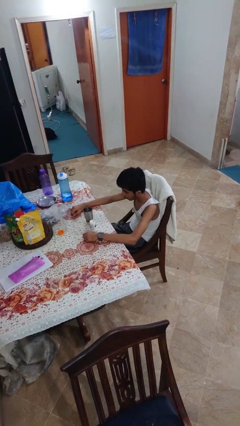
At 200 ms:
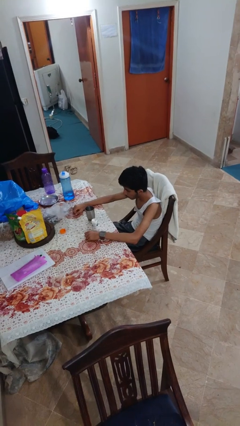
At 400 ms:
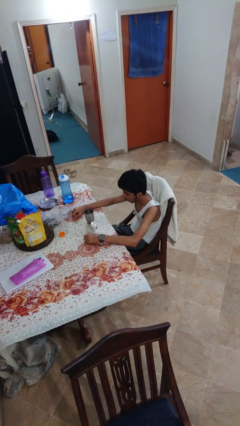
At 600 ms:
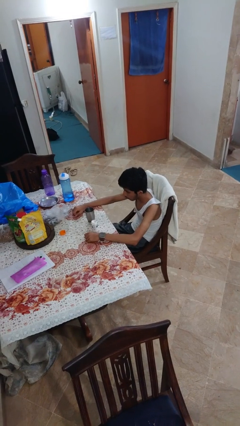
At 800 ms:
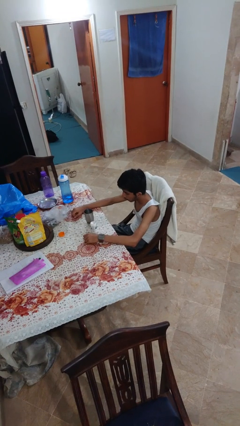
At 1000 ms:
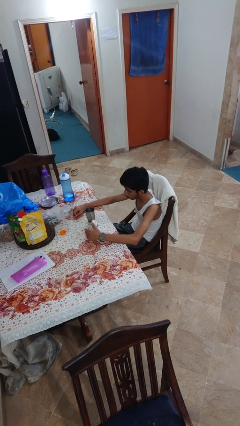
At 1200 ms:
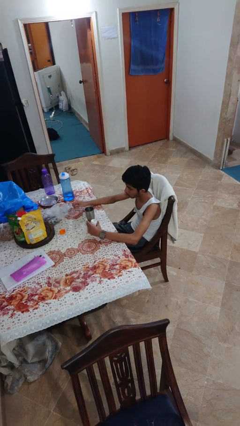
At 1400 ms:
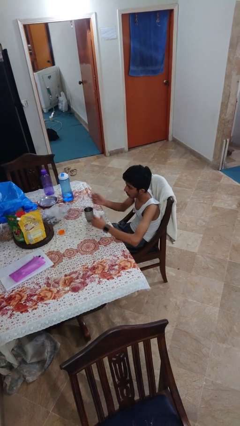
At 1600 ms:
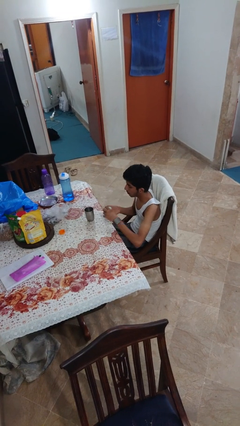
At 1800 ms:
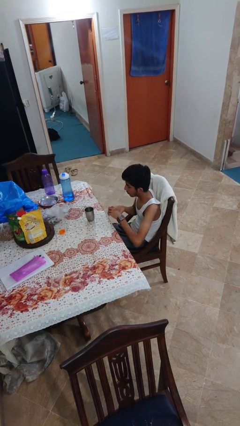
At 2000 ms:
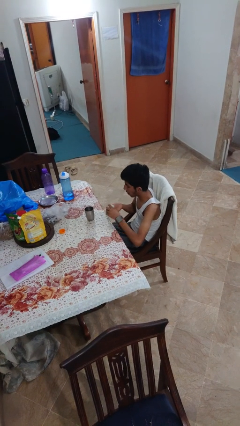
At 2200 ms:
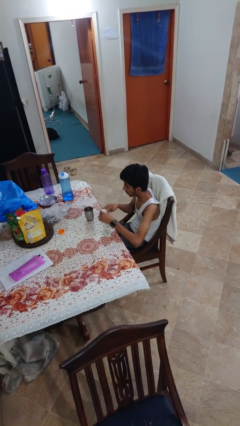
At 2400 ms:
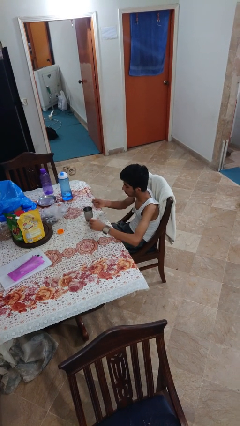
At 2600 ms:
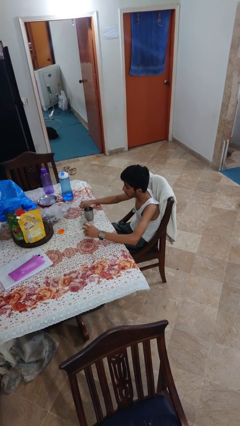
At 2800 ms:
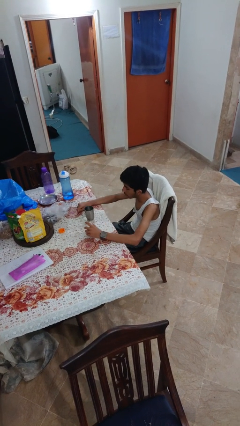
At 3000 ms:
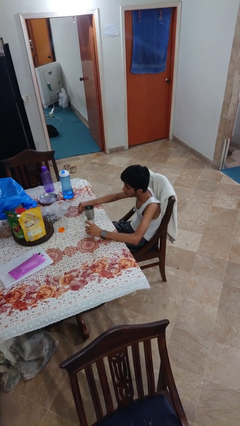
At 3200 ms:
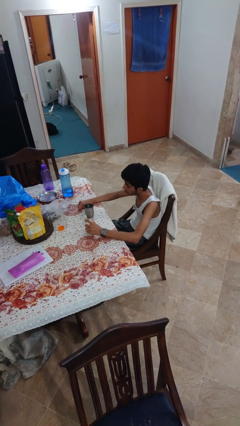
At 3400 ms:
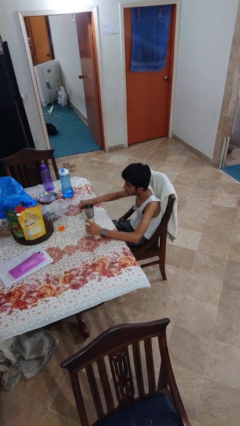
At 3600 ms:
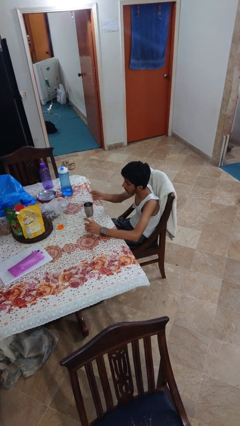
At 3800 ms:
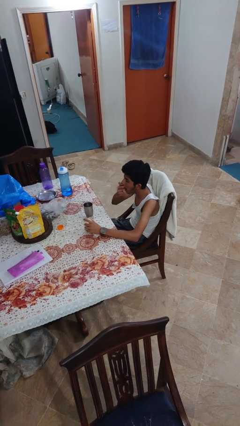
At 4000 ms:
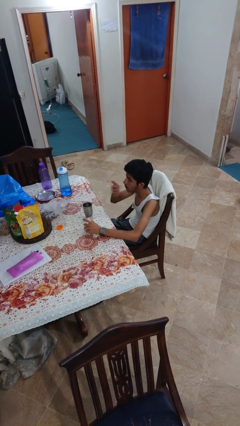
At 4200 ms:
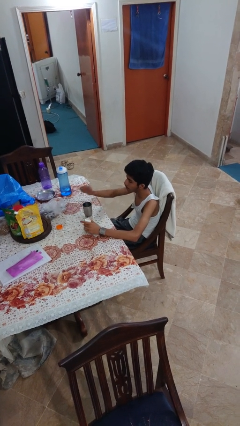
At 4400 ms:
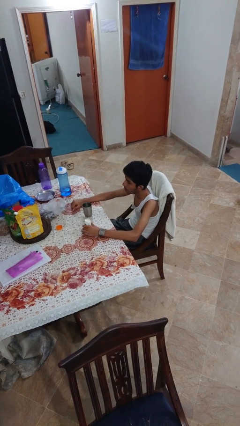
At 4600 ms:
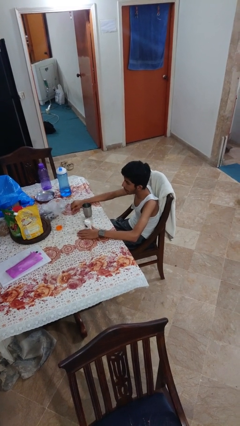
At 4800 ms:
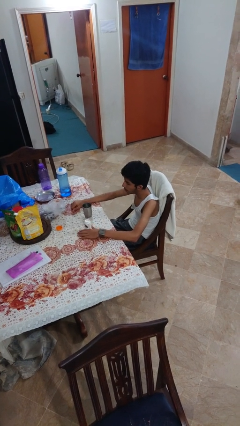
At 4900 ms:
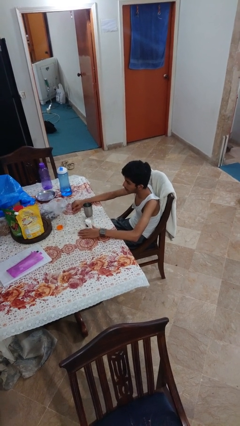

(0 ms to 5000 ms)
person takes medicine pills

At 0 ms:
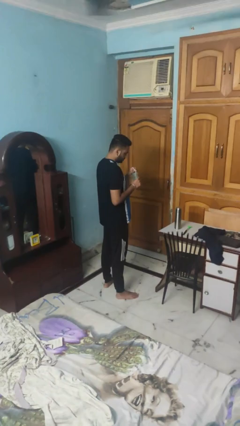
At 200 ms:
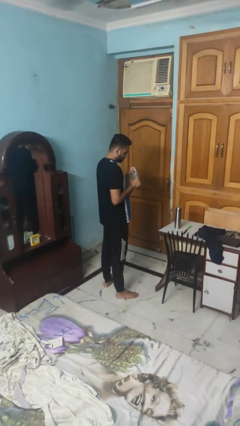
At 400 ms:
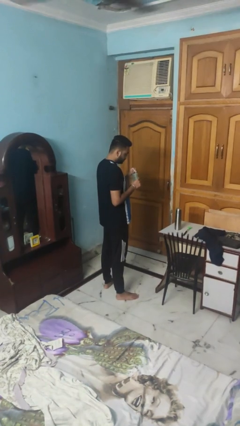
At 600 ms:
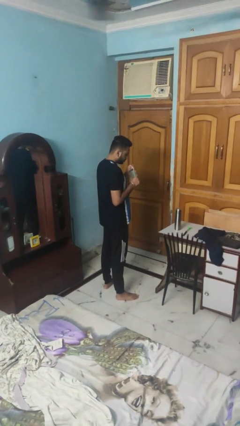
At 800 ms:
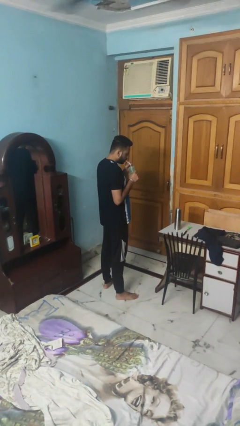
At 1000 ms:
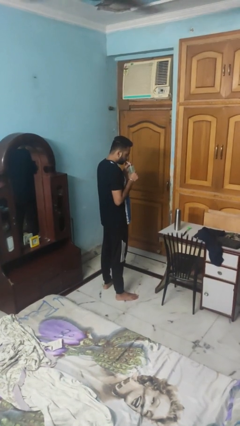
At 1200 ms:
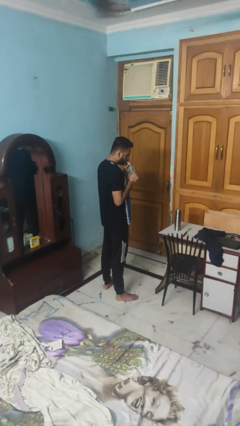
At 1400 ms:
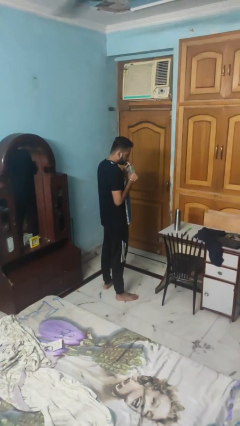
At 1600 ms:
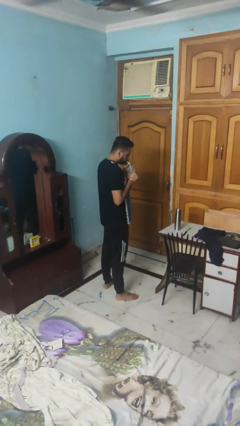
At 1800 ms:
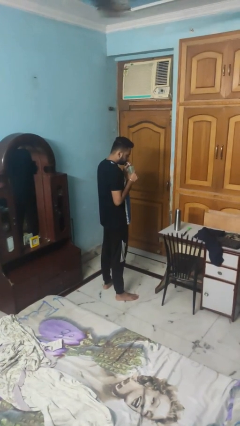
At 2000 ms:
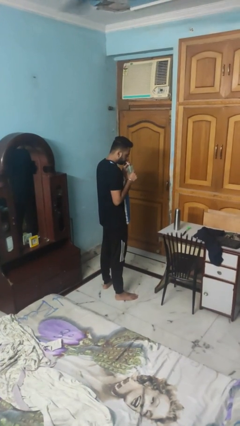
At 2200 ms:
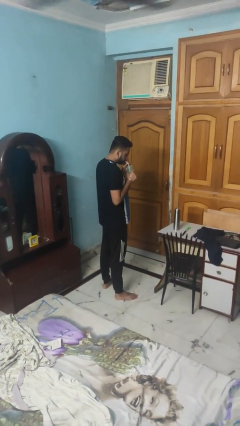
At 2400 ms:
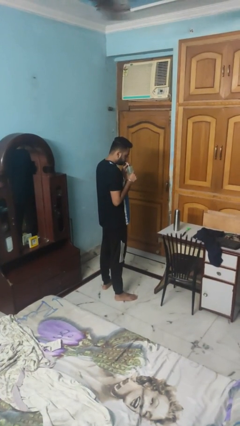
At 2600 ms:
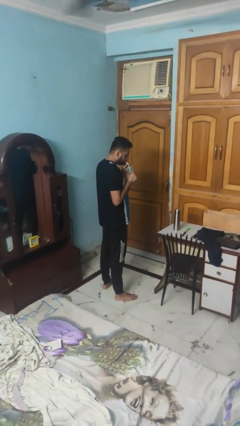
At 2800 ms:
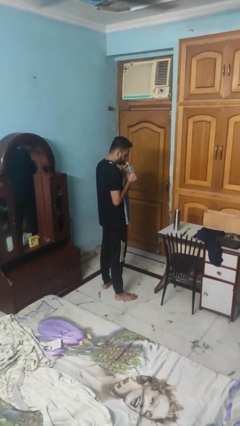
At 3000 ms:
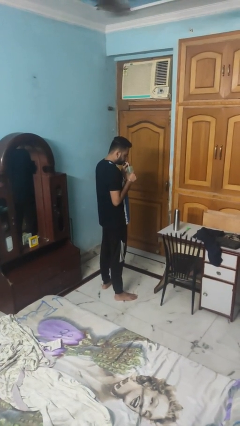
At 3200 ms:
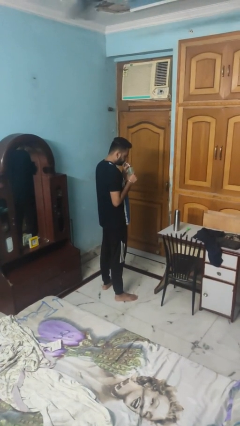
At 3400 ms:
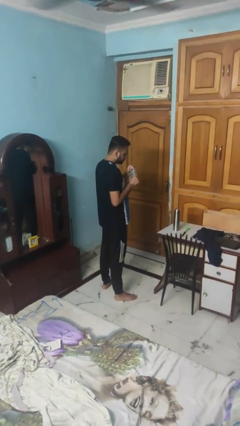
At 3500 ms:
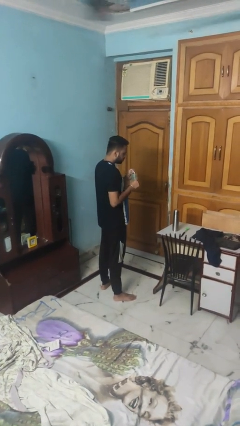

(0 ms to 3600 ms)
person drinks from straw

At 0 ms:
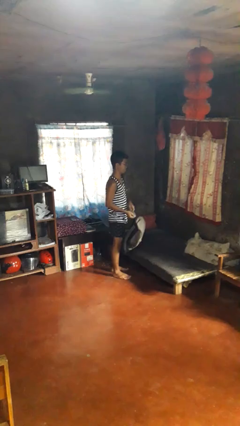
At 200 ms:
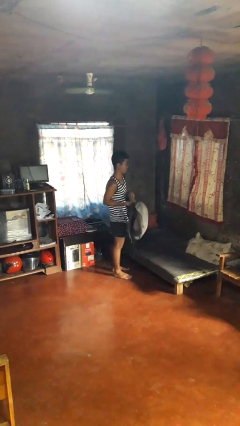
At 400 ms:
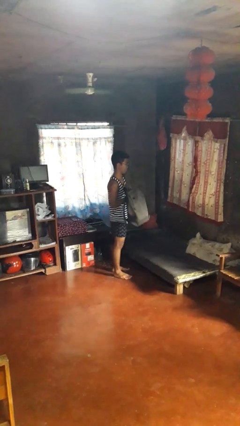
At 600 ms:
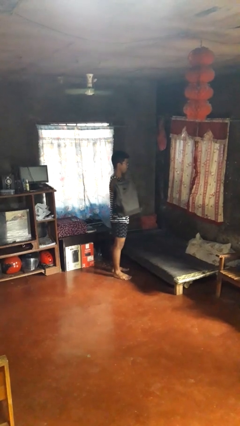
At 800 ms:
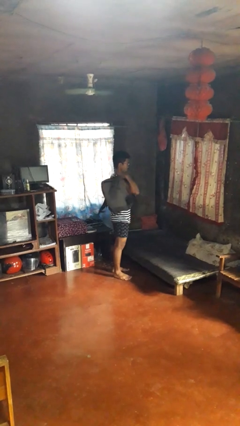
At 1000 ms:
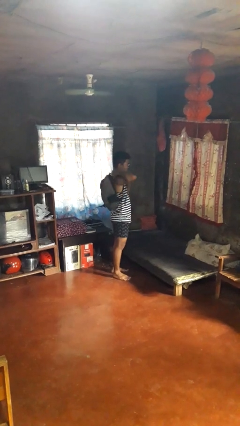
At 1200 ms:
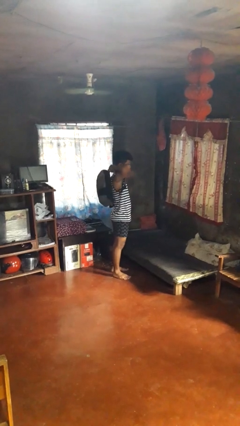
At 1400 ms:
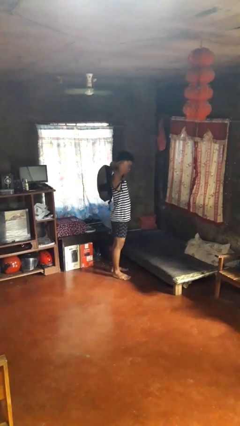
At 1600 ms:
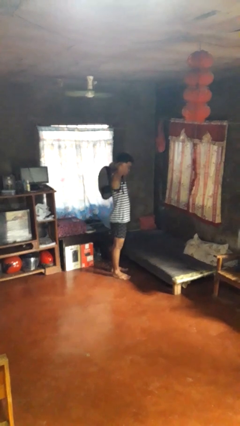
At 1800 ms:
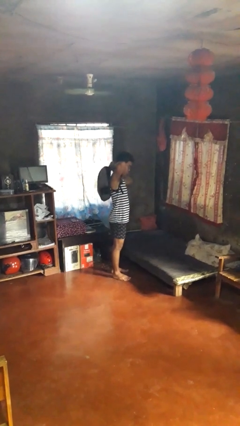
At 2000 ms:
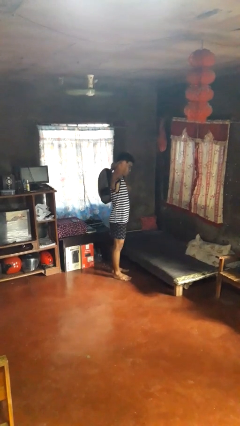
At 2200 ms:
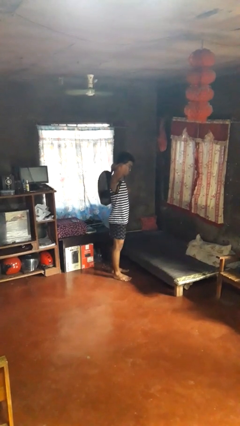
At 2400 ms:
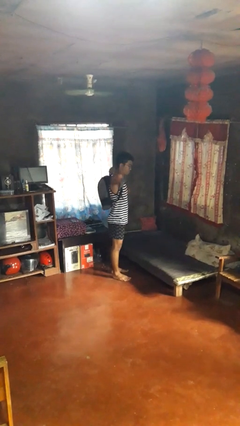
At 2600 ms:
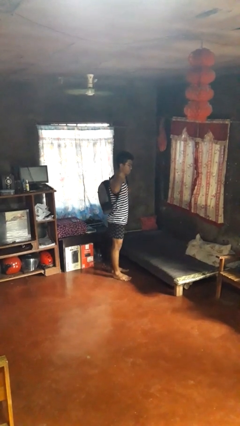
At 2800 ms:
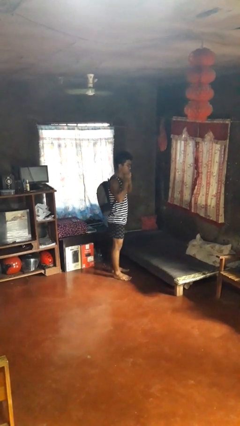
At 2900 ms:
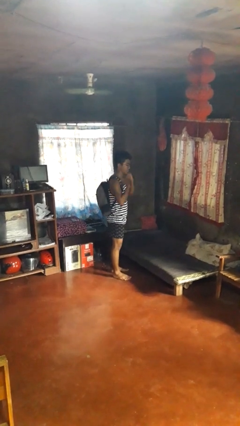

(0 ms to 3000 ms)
person puts on backpack

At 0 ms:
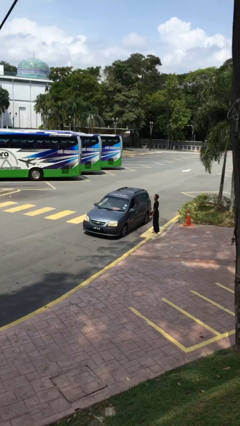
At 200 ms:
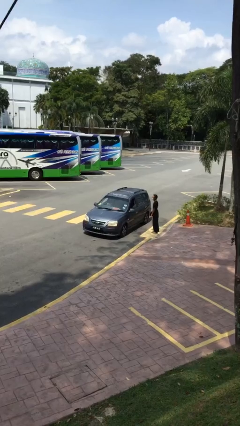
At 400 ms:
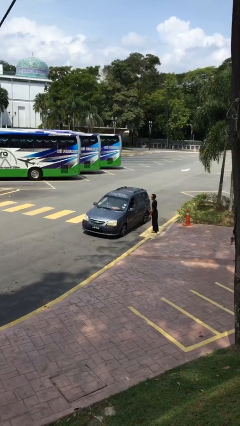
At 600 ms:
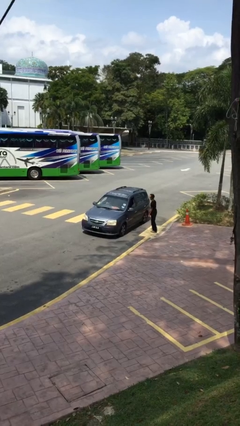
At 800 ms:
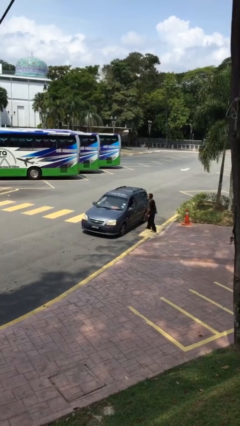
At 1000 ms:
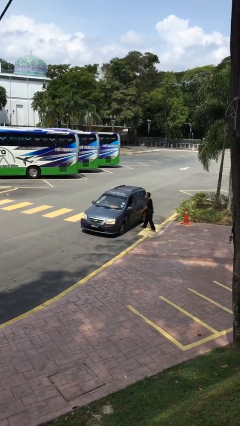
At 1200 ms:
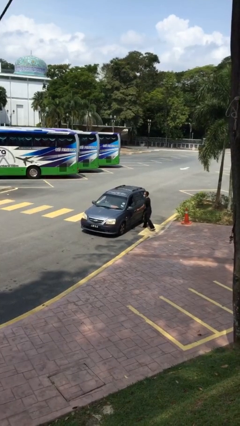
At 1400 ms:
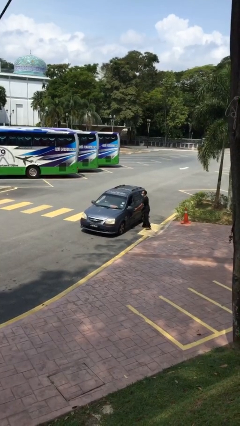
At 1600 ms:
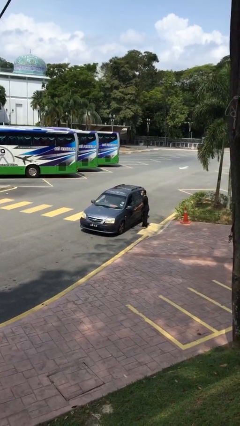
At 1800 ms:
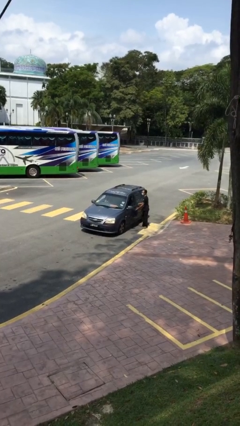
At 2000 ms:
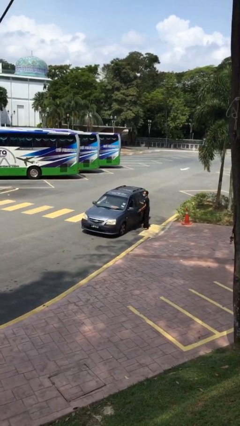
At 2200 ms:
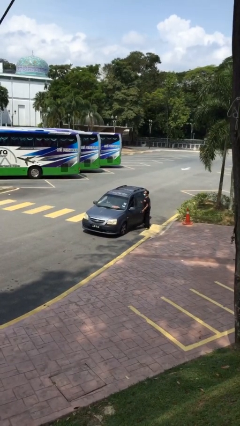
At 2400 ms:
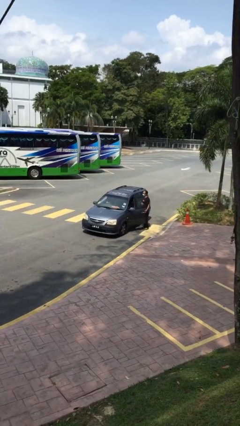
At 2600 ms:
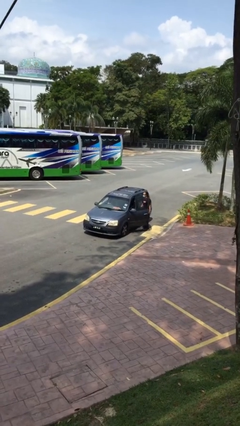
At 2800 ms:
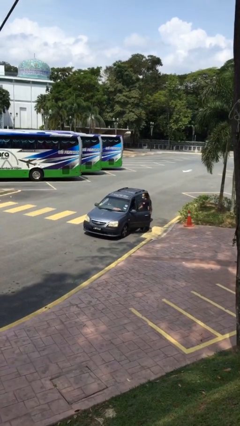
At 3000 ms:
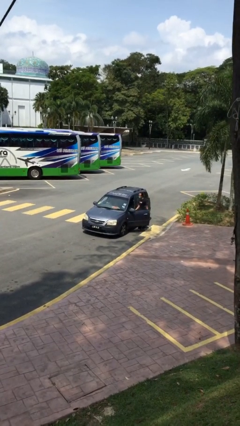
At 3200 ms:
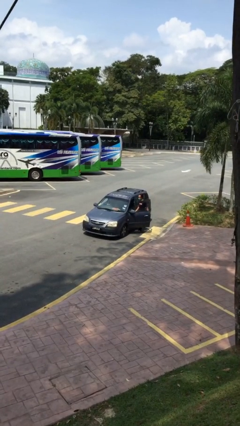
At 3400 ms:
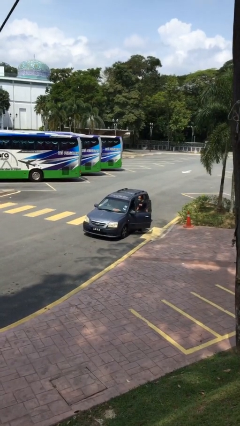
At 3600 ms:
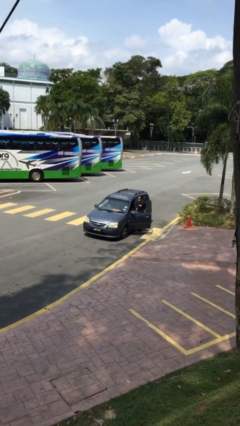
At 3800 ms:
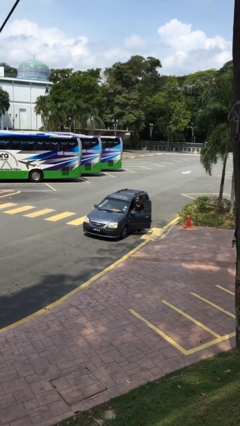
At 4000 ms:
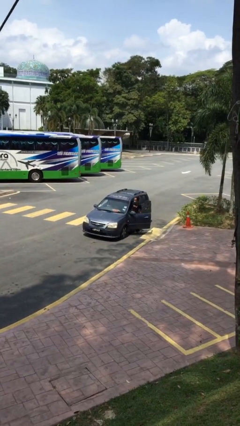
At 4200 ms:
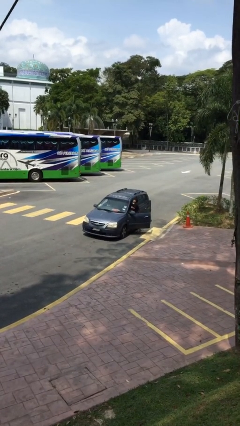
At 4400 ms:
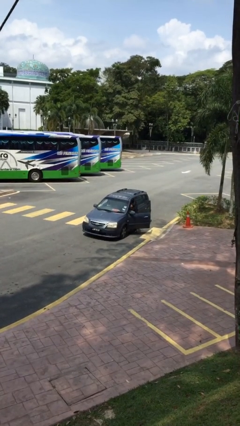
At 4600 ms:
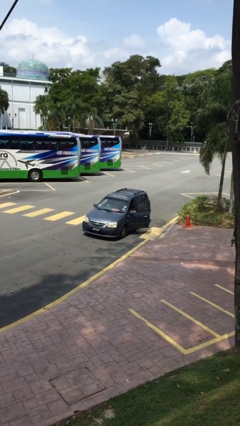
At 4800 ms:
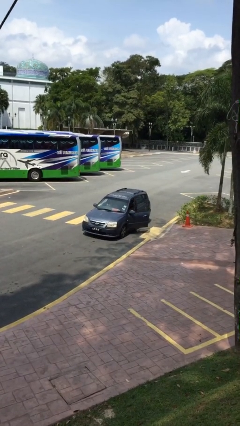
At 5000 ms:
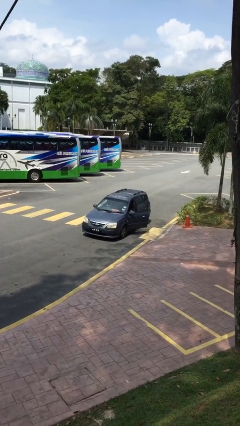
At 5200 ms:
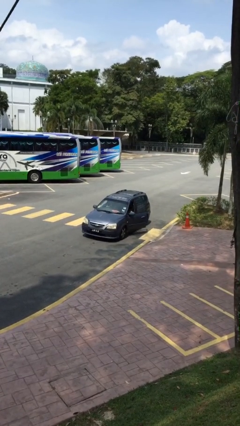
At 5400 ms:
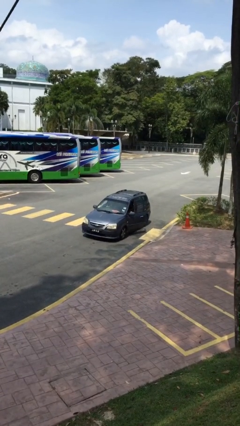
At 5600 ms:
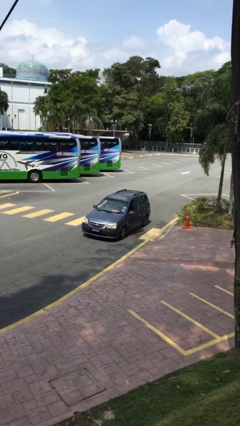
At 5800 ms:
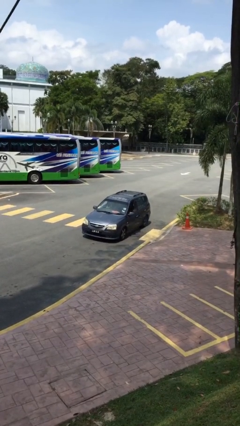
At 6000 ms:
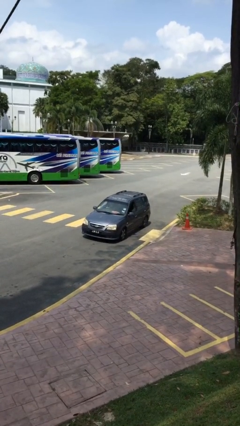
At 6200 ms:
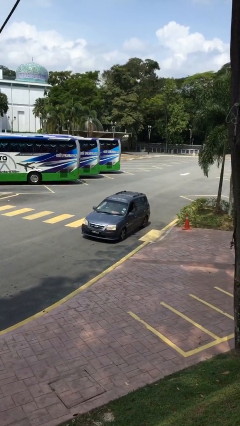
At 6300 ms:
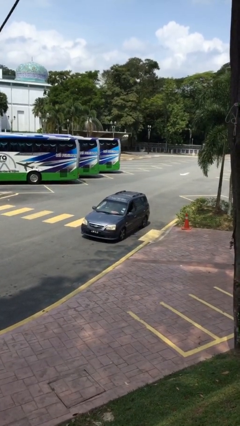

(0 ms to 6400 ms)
car picks up person
